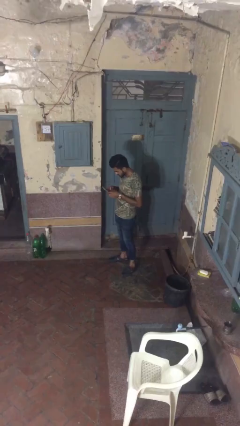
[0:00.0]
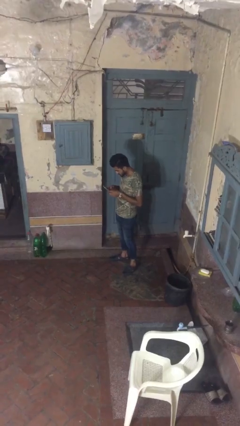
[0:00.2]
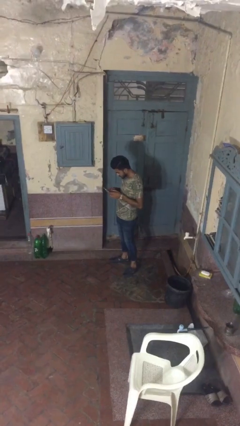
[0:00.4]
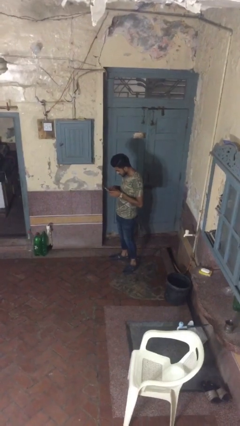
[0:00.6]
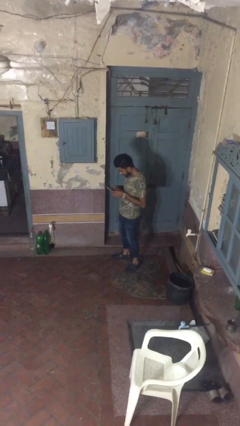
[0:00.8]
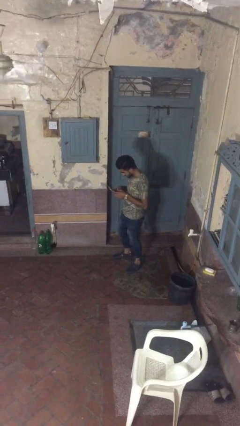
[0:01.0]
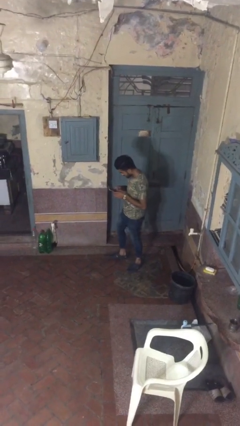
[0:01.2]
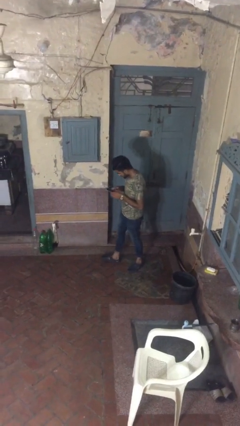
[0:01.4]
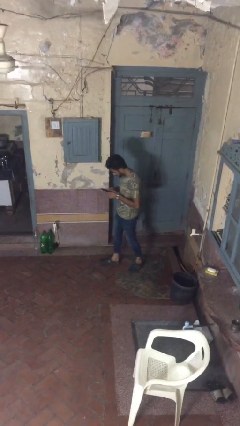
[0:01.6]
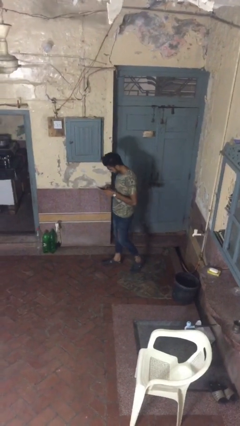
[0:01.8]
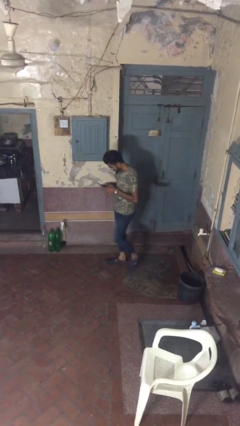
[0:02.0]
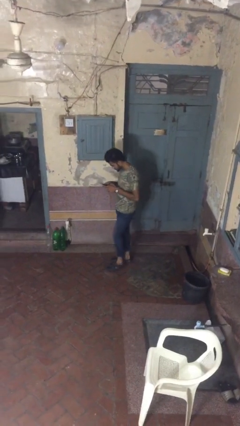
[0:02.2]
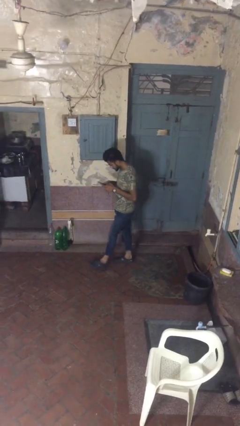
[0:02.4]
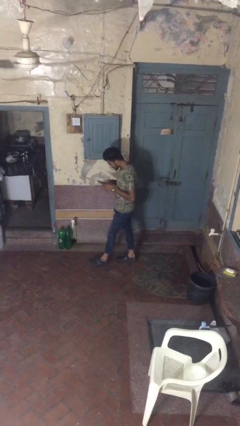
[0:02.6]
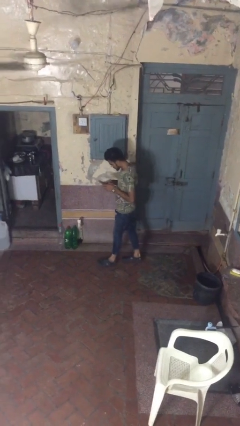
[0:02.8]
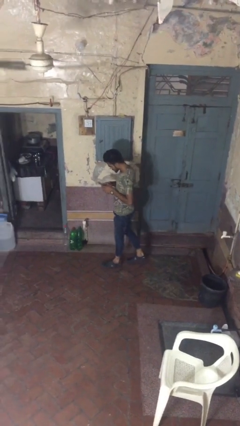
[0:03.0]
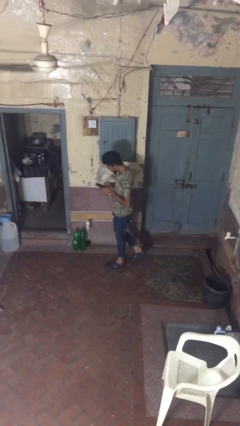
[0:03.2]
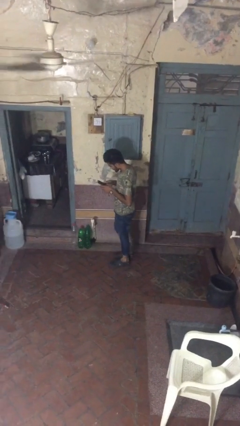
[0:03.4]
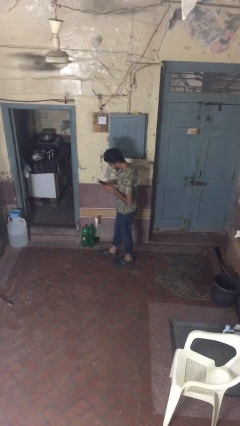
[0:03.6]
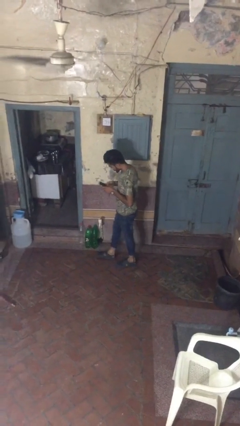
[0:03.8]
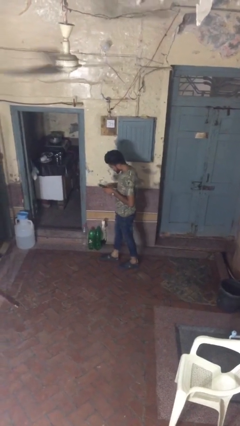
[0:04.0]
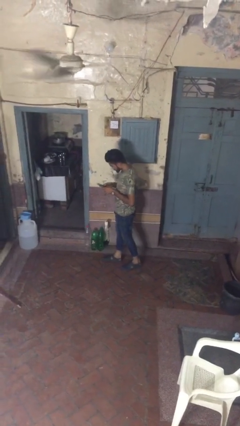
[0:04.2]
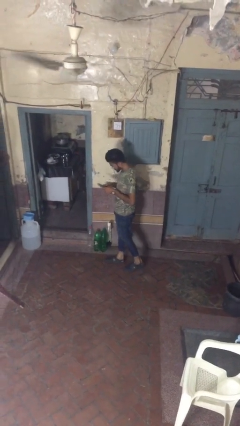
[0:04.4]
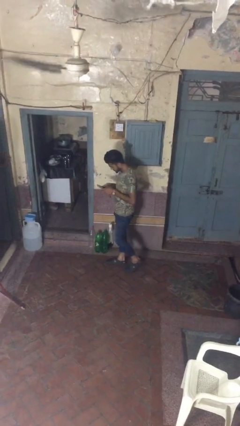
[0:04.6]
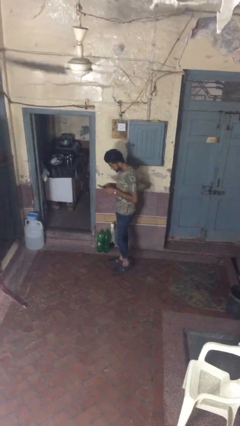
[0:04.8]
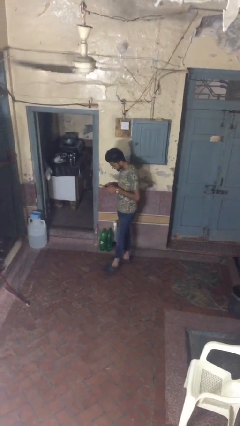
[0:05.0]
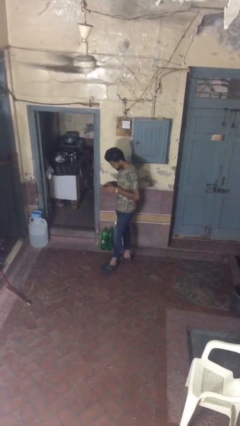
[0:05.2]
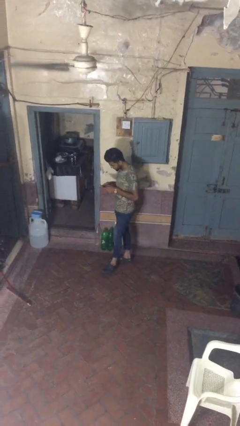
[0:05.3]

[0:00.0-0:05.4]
person texts on phone

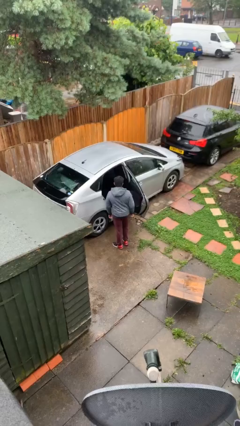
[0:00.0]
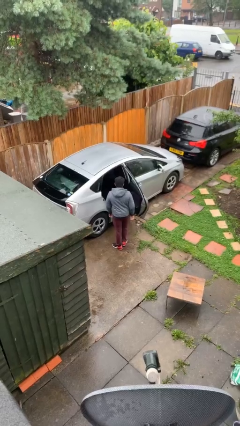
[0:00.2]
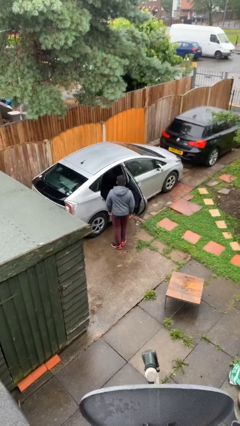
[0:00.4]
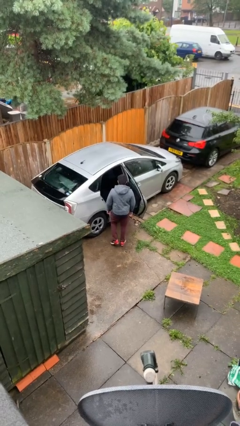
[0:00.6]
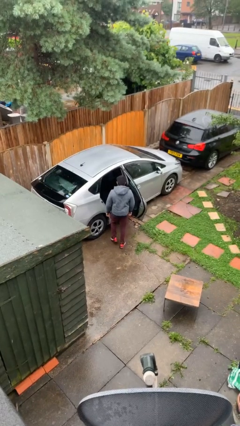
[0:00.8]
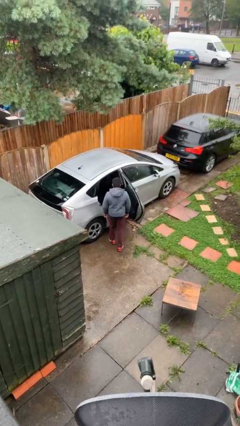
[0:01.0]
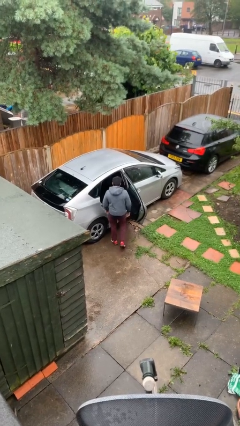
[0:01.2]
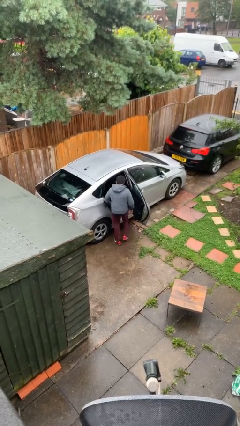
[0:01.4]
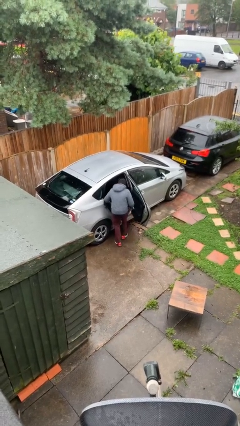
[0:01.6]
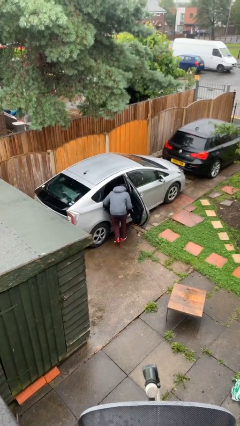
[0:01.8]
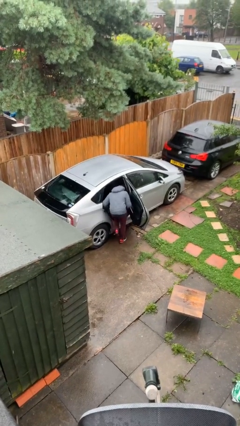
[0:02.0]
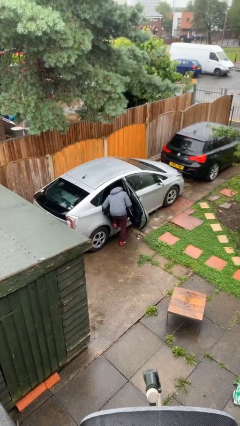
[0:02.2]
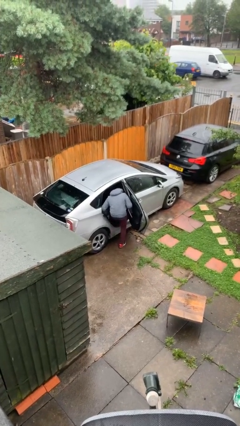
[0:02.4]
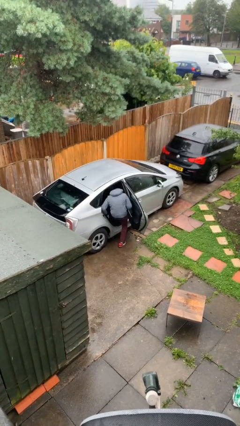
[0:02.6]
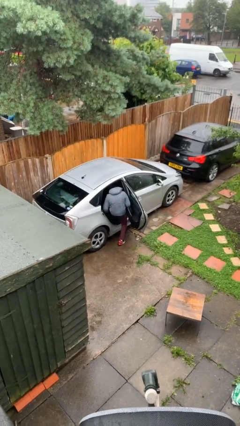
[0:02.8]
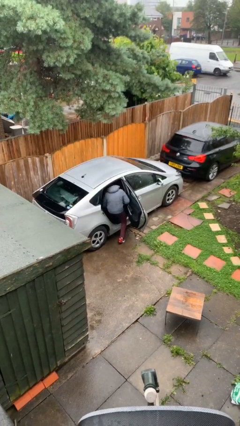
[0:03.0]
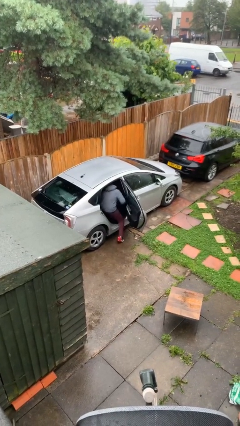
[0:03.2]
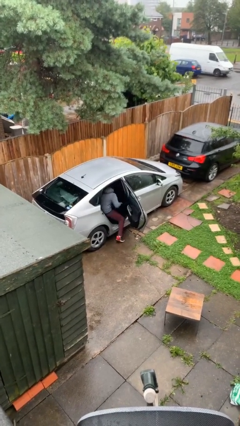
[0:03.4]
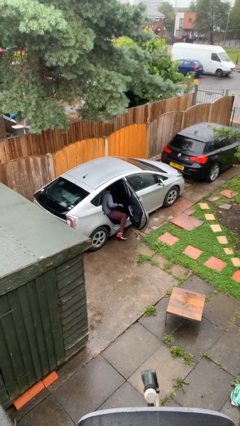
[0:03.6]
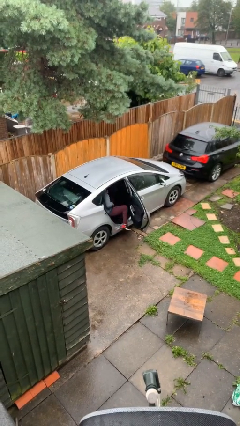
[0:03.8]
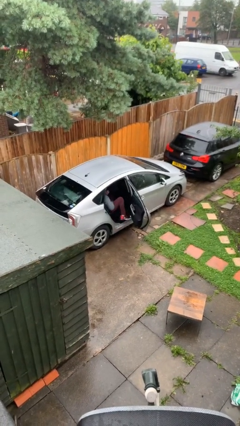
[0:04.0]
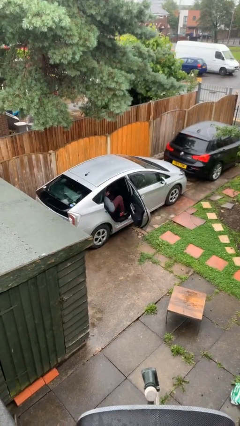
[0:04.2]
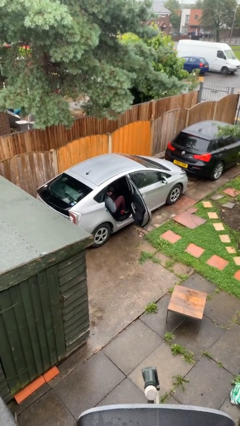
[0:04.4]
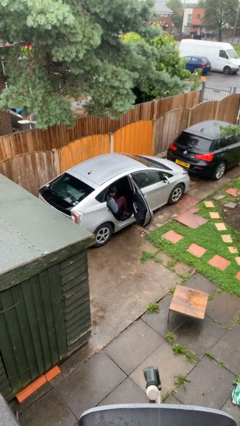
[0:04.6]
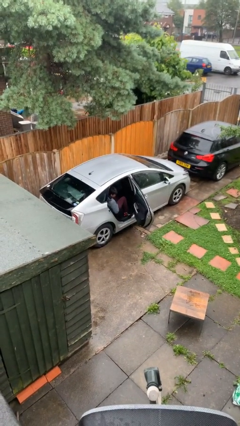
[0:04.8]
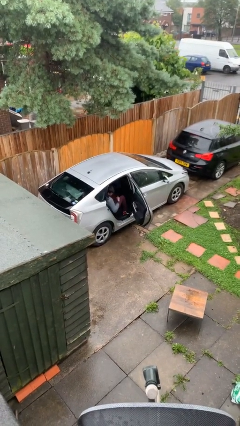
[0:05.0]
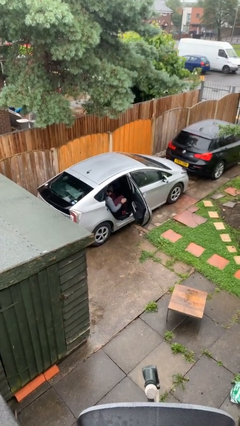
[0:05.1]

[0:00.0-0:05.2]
person enters car

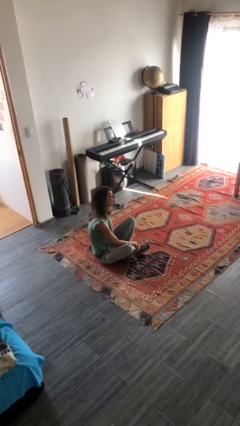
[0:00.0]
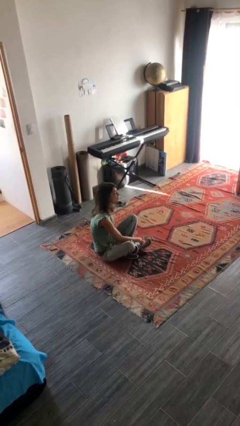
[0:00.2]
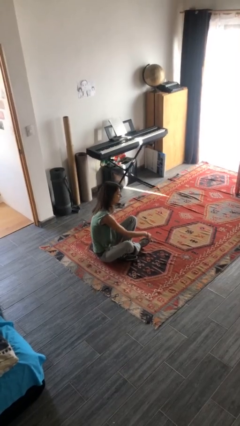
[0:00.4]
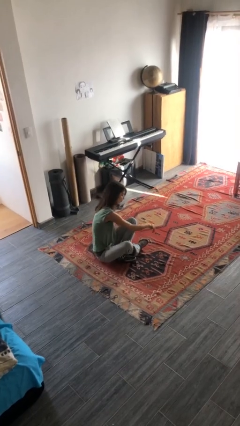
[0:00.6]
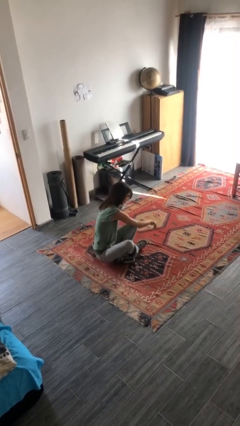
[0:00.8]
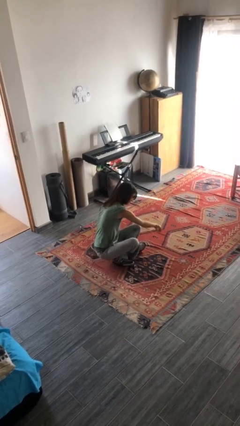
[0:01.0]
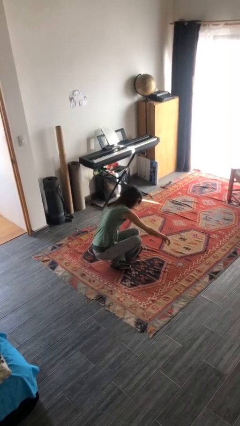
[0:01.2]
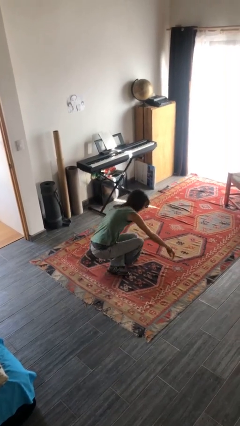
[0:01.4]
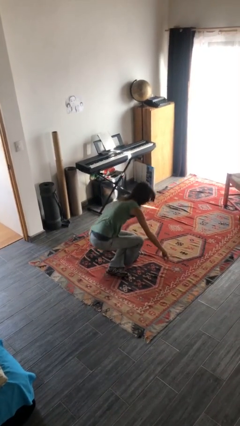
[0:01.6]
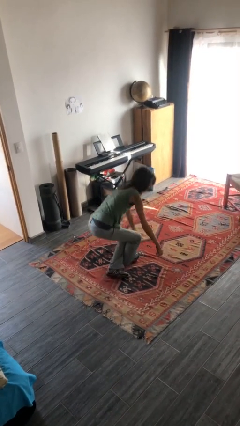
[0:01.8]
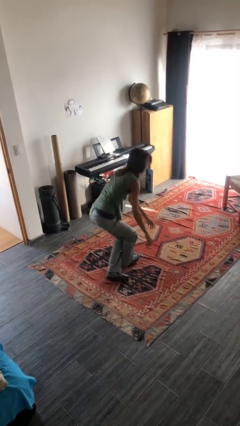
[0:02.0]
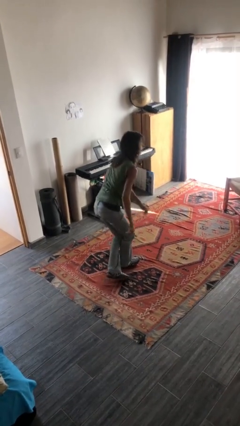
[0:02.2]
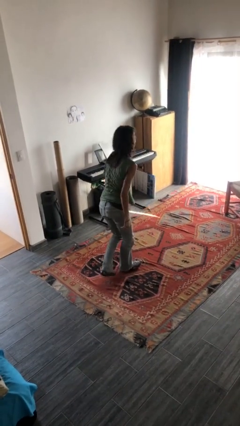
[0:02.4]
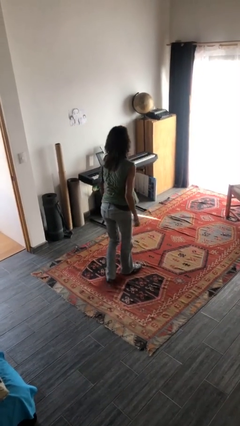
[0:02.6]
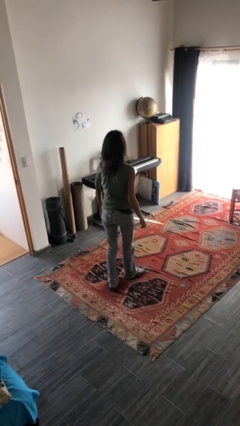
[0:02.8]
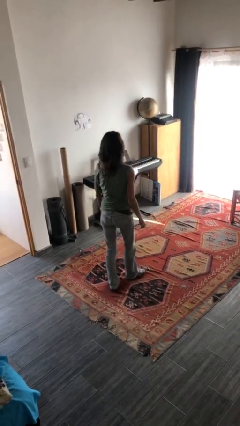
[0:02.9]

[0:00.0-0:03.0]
person stands up from floor

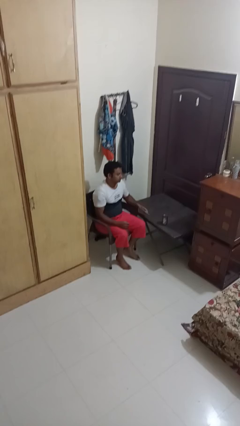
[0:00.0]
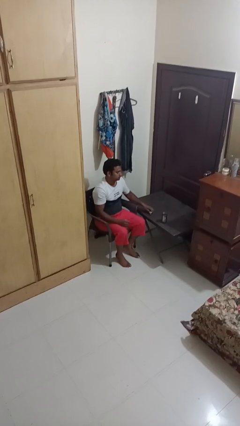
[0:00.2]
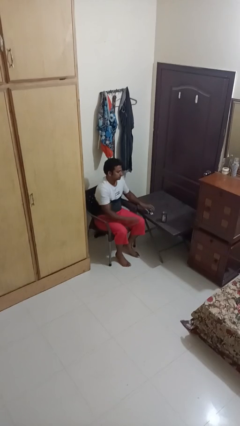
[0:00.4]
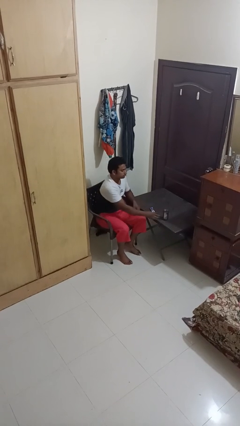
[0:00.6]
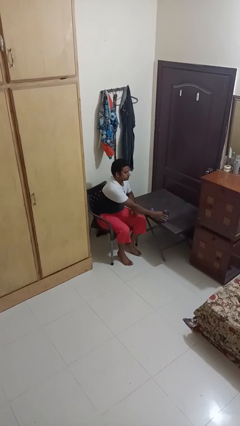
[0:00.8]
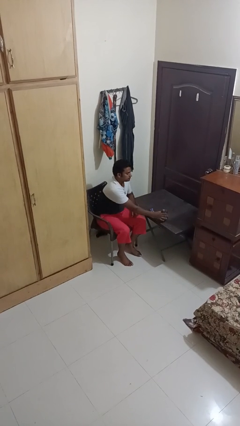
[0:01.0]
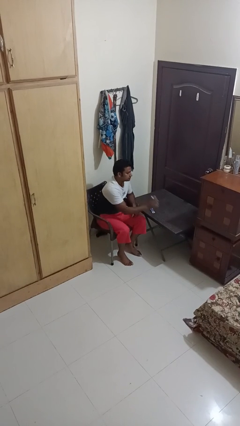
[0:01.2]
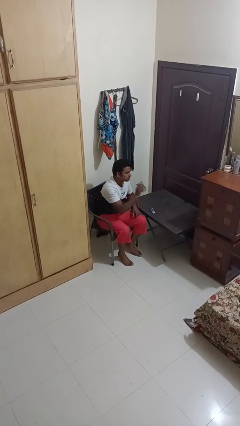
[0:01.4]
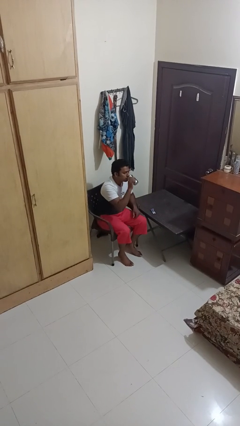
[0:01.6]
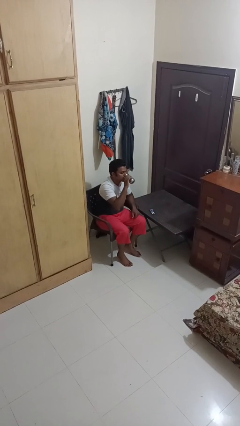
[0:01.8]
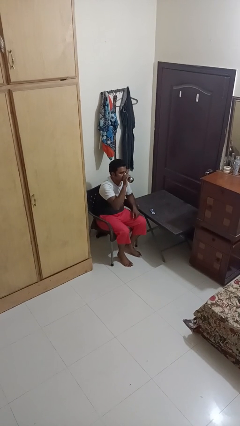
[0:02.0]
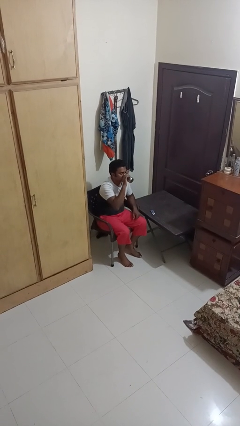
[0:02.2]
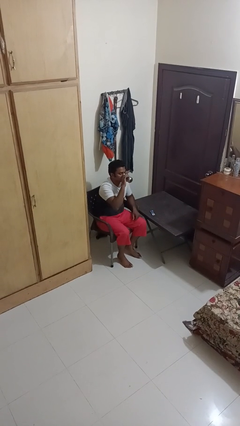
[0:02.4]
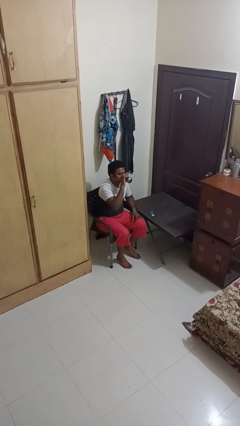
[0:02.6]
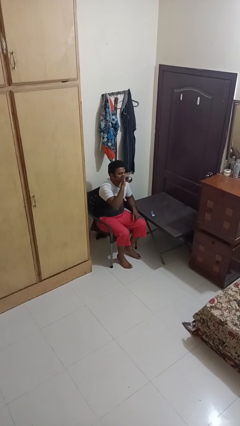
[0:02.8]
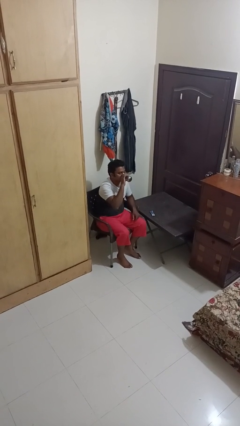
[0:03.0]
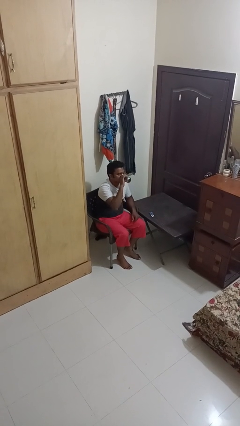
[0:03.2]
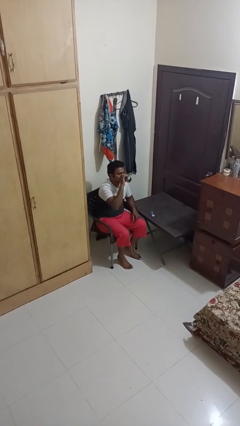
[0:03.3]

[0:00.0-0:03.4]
person drinks from cup

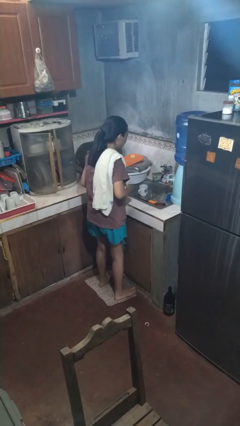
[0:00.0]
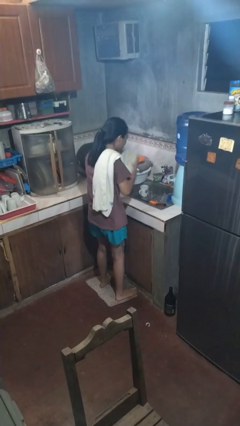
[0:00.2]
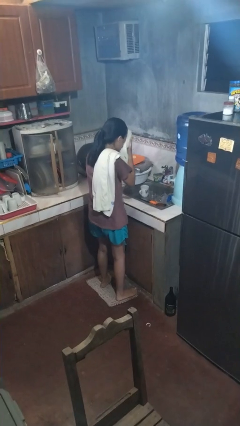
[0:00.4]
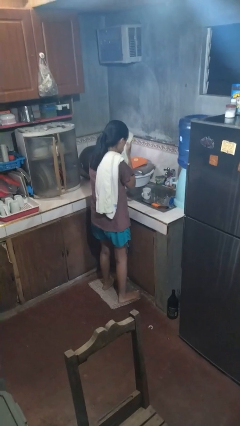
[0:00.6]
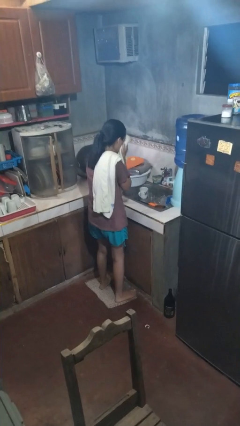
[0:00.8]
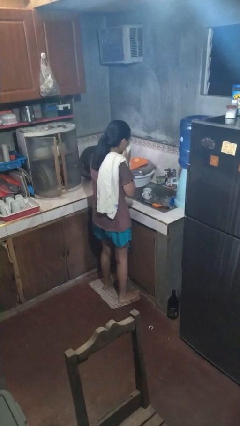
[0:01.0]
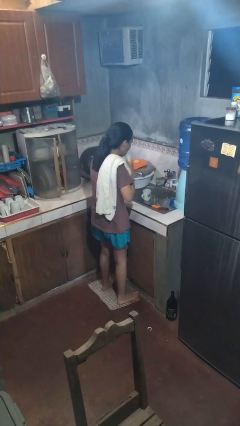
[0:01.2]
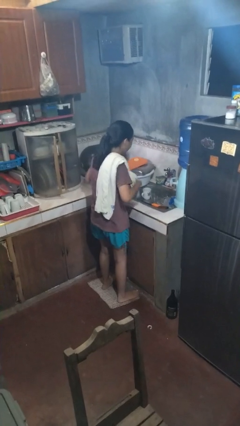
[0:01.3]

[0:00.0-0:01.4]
person dries face with towel
